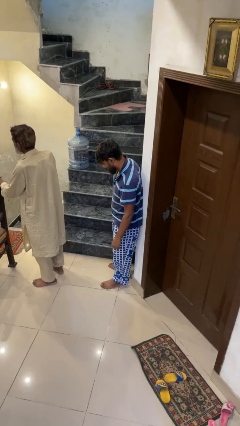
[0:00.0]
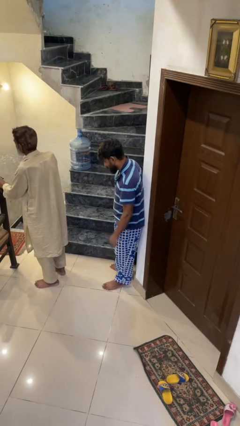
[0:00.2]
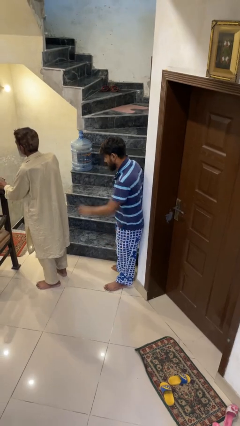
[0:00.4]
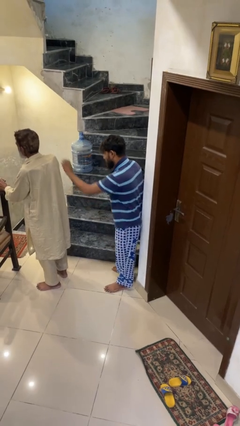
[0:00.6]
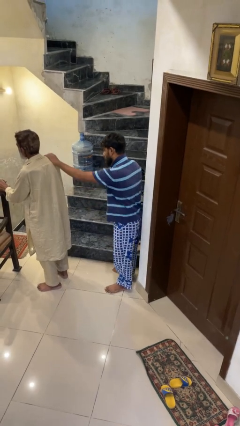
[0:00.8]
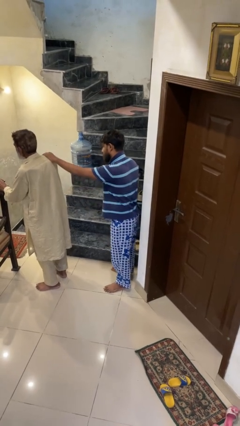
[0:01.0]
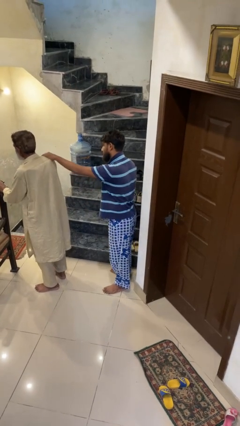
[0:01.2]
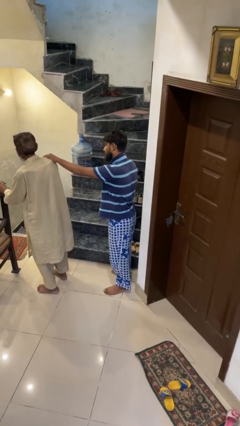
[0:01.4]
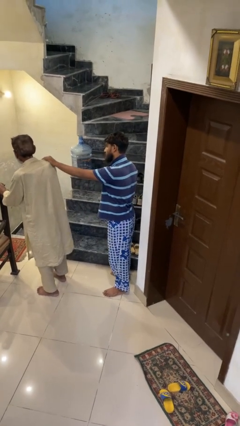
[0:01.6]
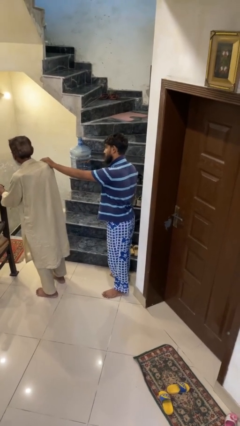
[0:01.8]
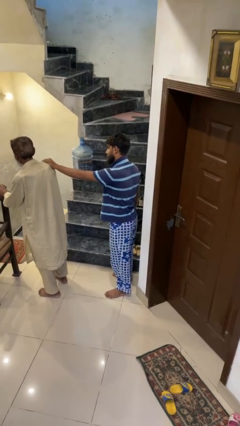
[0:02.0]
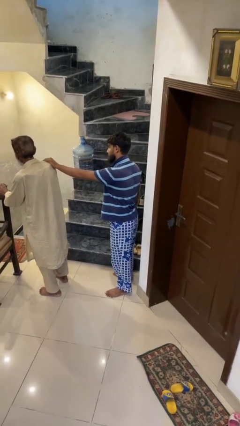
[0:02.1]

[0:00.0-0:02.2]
person grabs person by shoulder

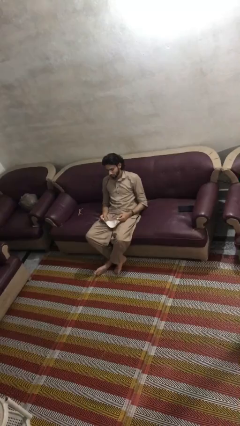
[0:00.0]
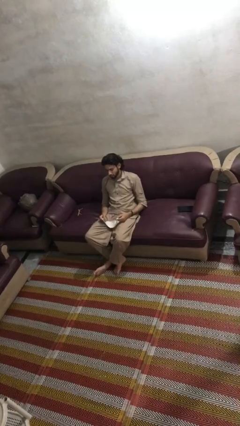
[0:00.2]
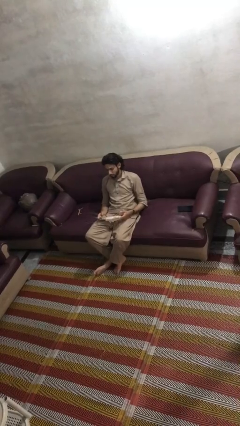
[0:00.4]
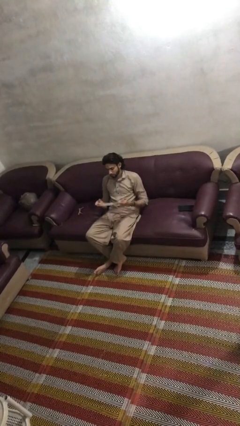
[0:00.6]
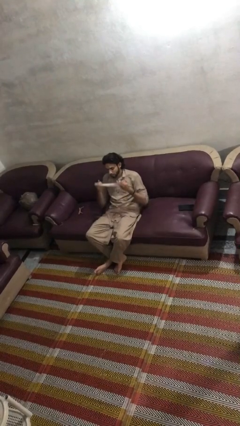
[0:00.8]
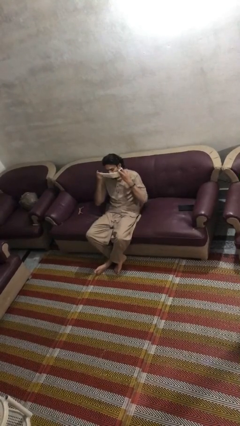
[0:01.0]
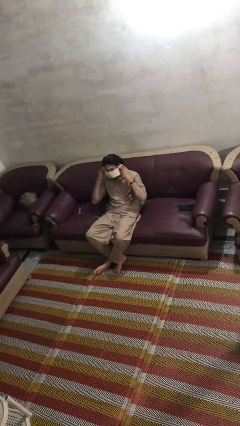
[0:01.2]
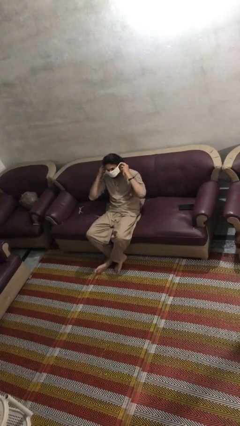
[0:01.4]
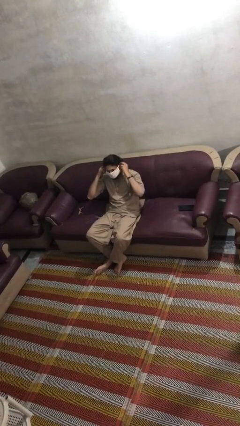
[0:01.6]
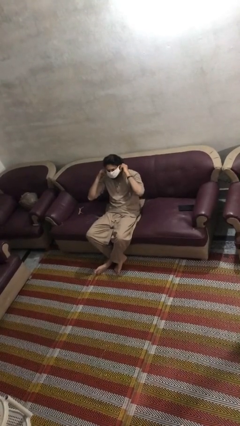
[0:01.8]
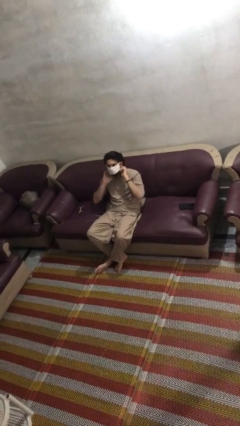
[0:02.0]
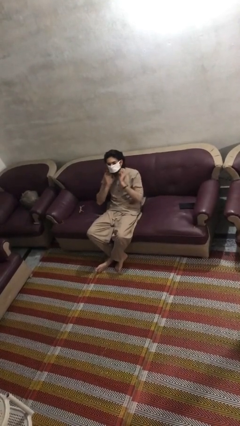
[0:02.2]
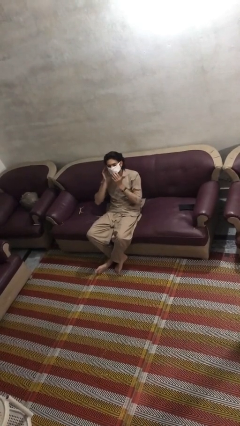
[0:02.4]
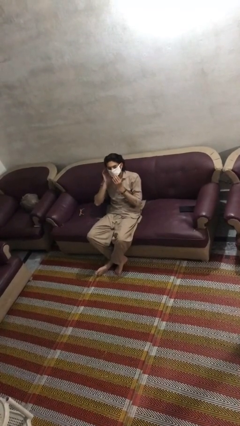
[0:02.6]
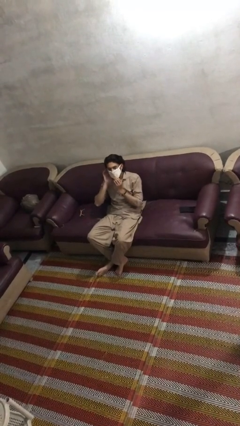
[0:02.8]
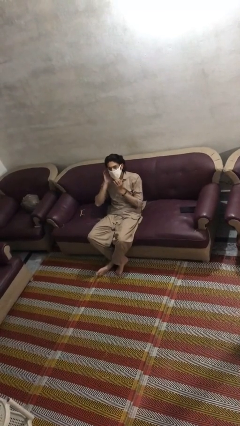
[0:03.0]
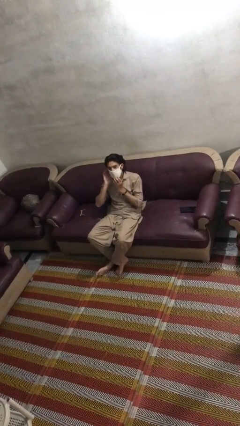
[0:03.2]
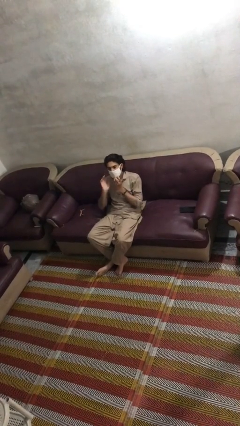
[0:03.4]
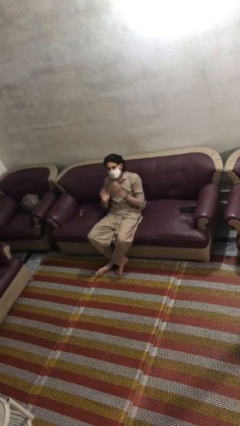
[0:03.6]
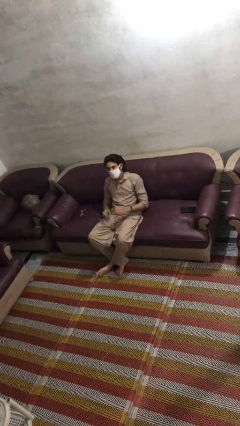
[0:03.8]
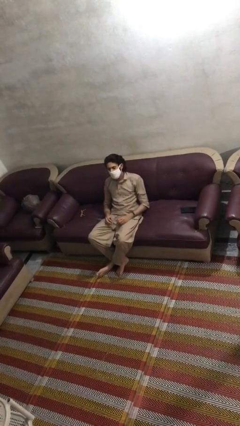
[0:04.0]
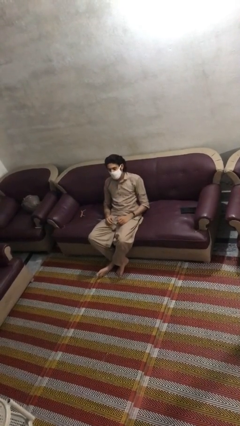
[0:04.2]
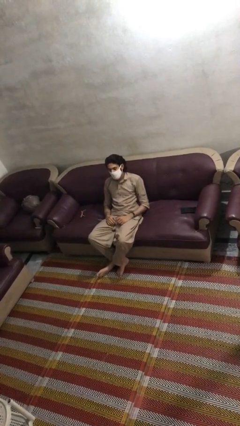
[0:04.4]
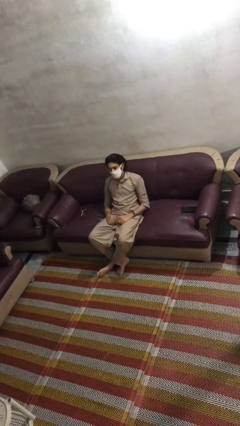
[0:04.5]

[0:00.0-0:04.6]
person puts on facemask

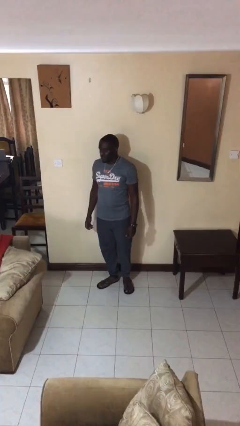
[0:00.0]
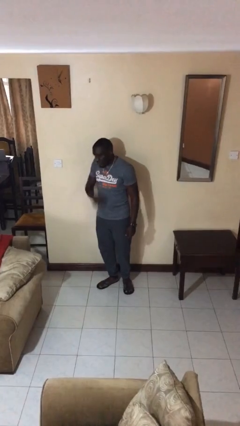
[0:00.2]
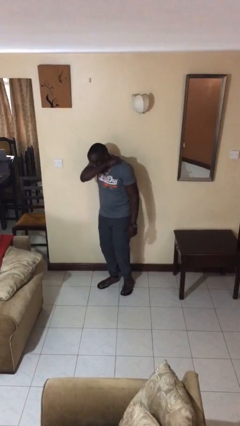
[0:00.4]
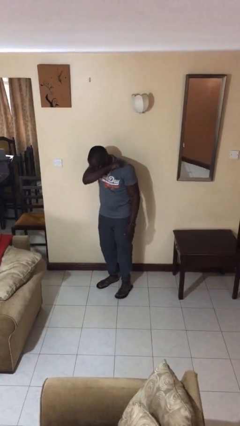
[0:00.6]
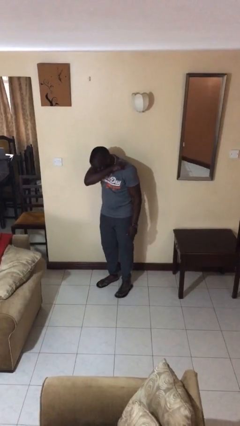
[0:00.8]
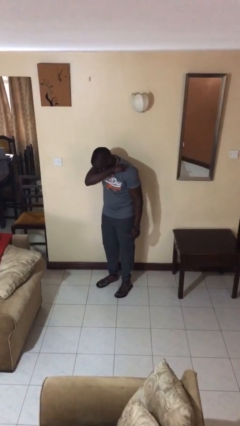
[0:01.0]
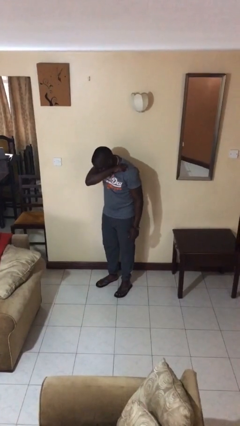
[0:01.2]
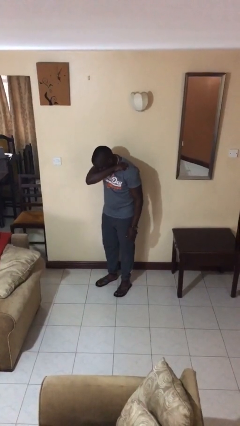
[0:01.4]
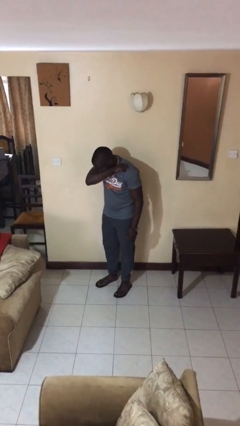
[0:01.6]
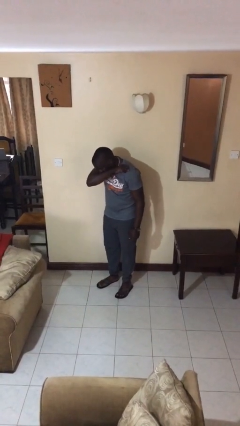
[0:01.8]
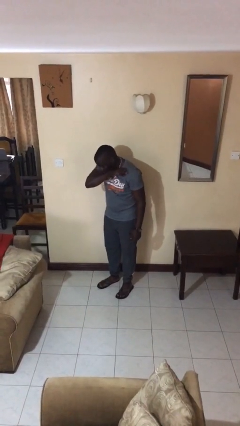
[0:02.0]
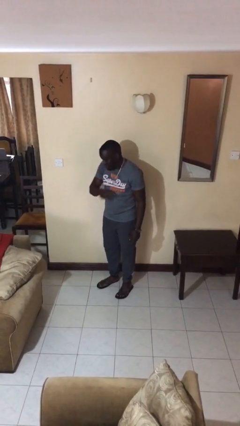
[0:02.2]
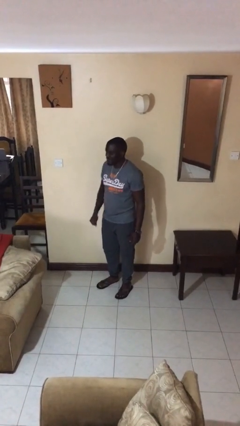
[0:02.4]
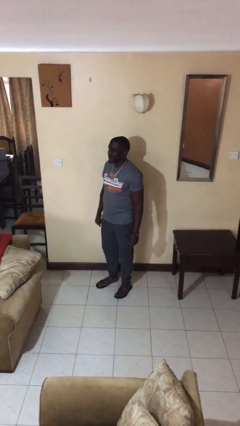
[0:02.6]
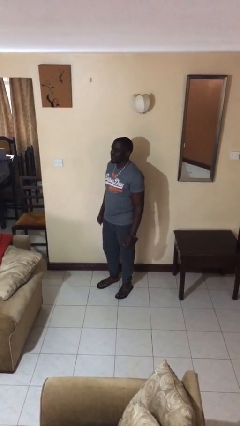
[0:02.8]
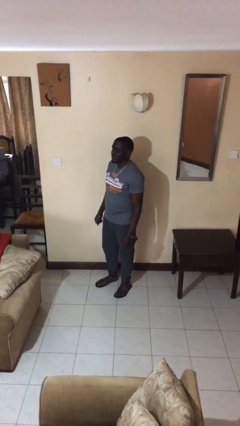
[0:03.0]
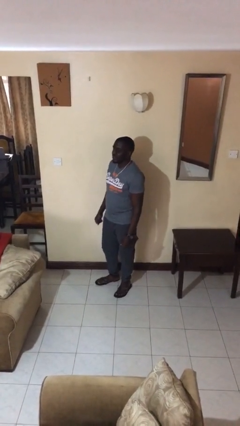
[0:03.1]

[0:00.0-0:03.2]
person sneezes into arm

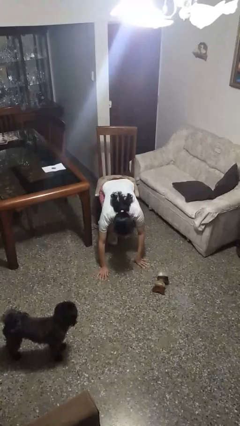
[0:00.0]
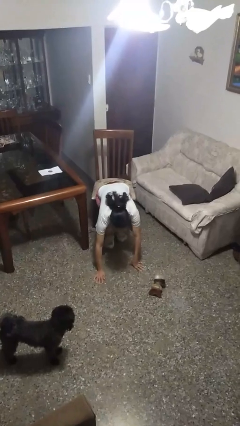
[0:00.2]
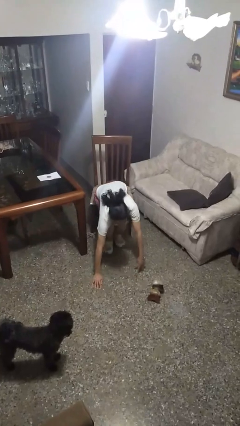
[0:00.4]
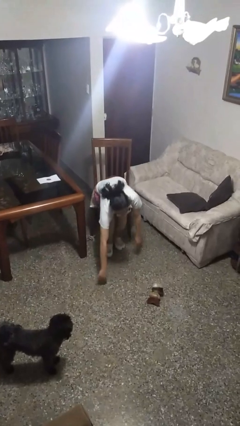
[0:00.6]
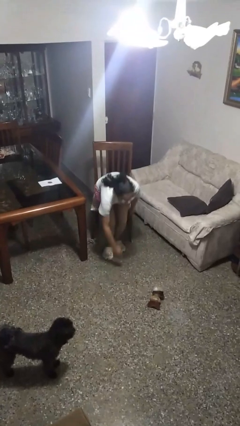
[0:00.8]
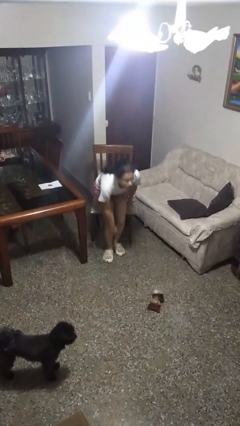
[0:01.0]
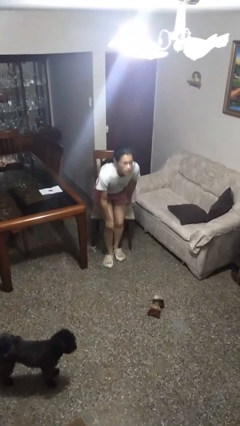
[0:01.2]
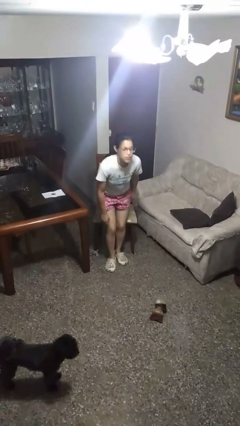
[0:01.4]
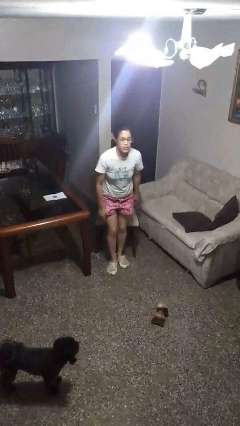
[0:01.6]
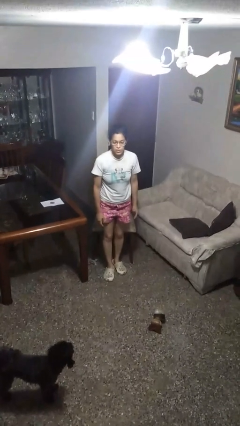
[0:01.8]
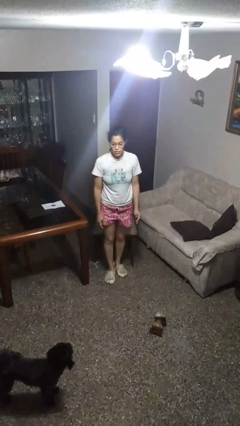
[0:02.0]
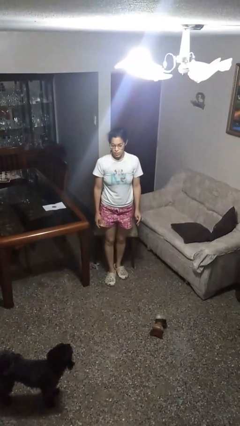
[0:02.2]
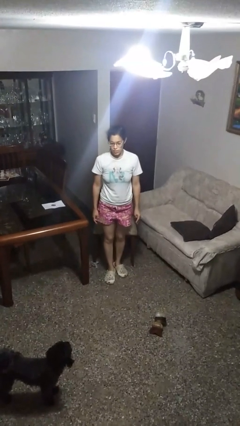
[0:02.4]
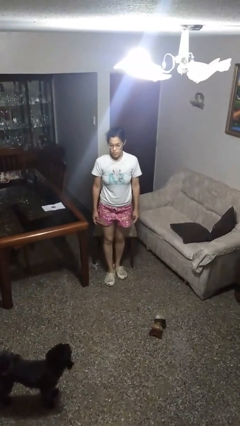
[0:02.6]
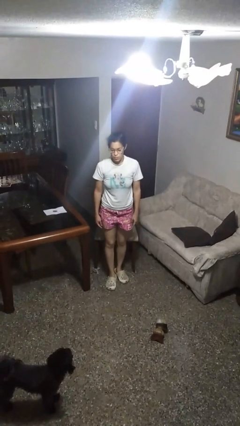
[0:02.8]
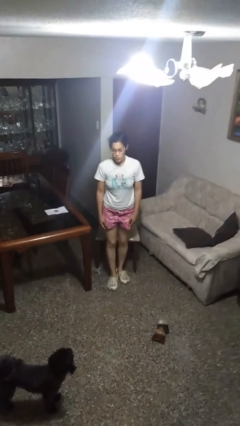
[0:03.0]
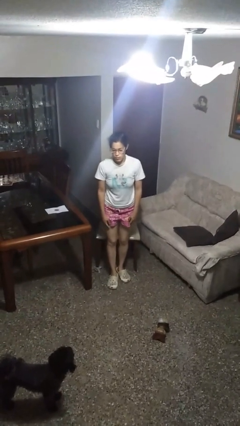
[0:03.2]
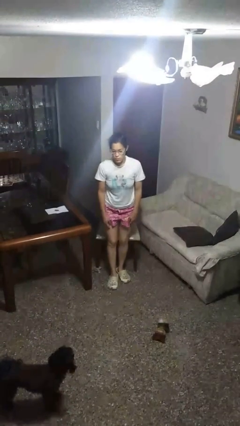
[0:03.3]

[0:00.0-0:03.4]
person stands up from floor

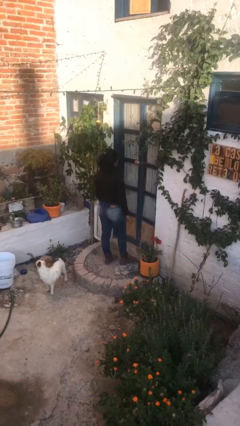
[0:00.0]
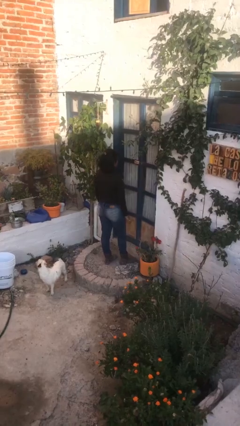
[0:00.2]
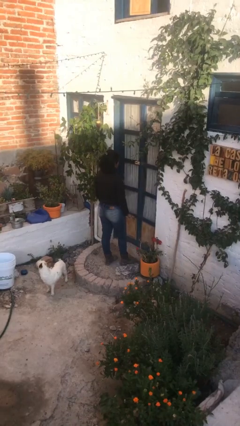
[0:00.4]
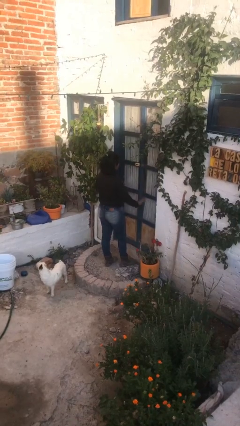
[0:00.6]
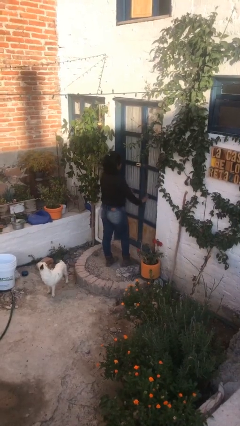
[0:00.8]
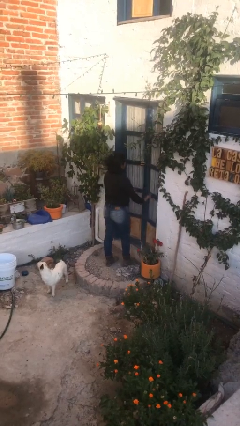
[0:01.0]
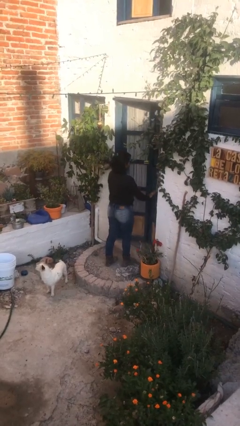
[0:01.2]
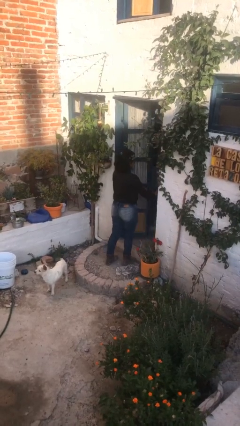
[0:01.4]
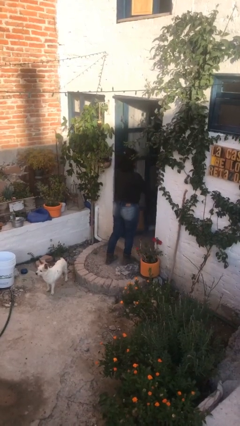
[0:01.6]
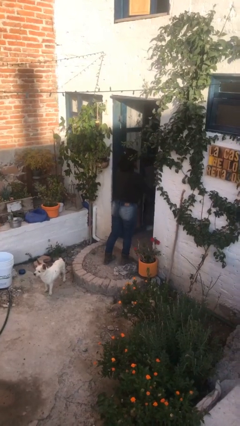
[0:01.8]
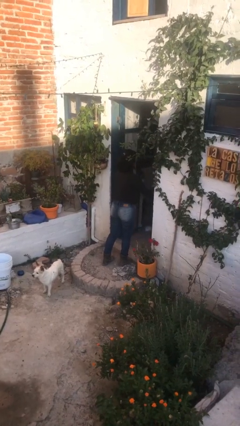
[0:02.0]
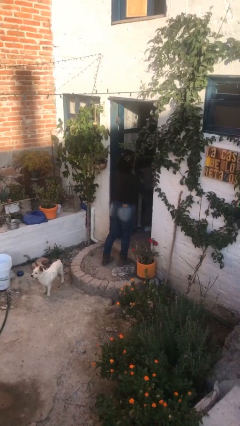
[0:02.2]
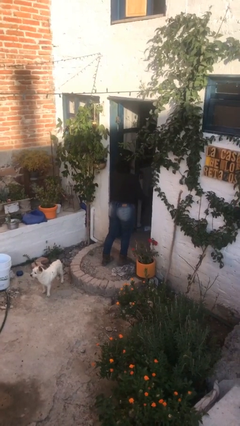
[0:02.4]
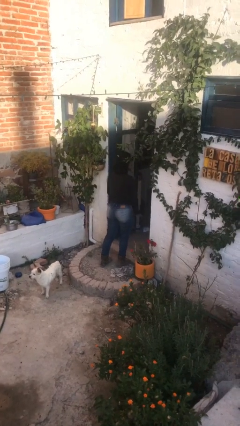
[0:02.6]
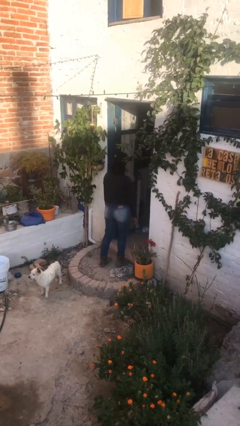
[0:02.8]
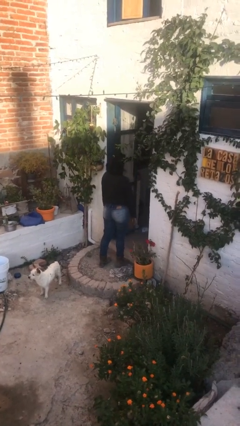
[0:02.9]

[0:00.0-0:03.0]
person opens facility door

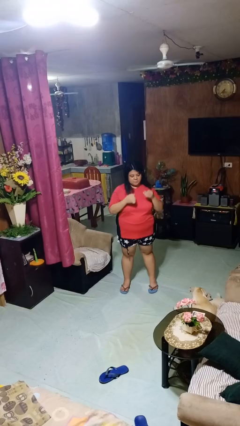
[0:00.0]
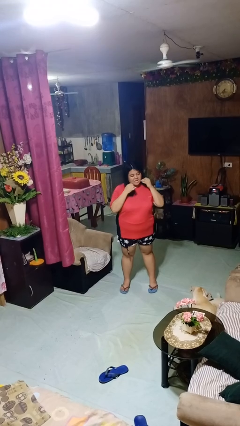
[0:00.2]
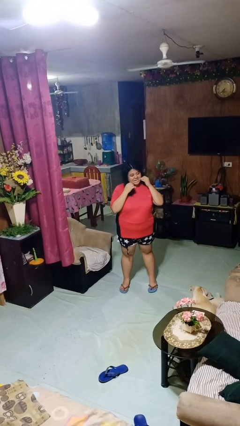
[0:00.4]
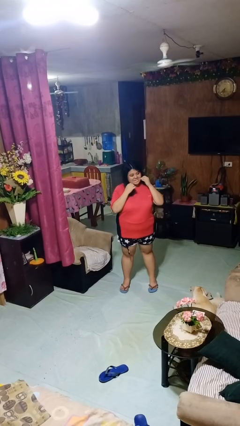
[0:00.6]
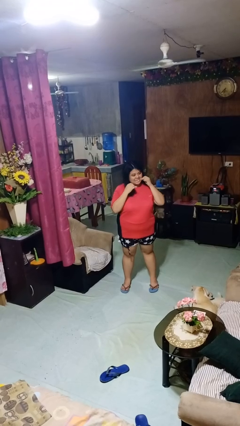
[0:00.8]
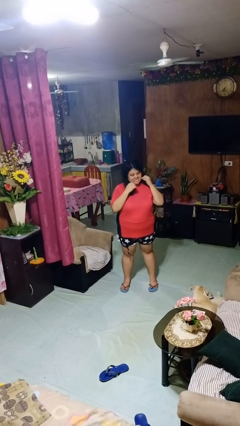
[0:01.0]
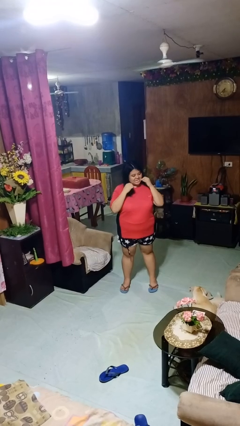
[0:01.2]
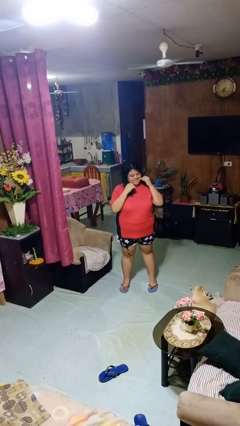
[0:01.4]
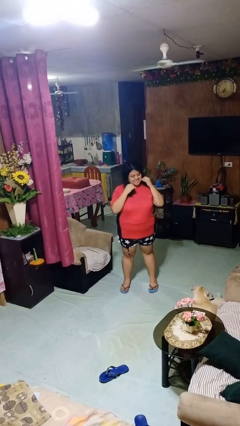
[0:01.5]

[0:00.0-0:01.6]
person flosses
